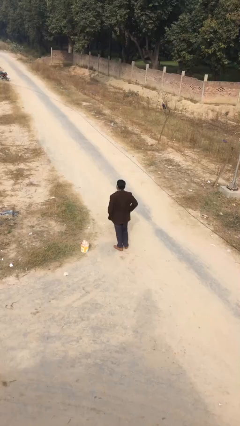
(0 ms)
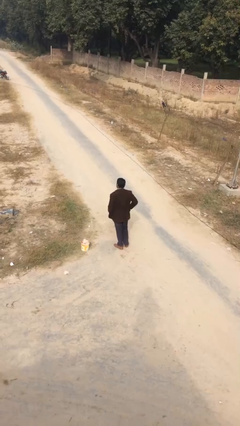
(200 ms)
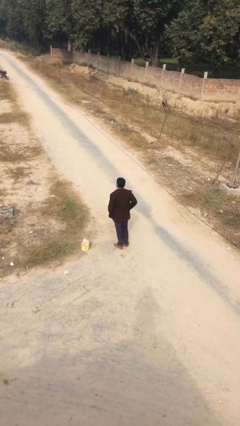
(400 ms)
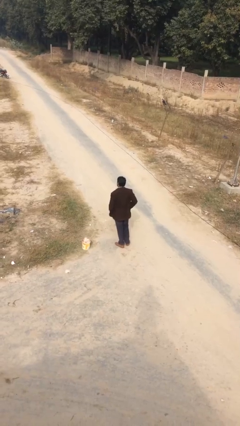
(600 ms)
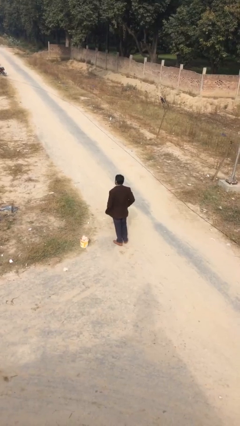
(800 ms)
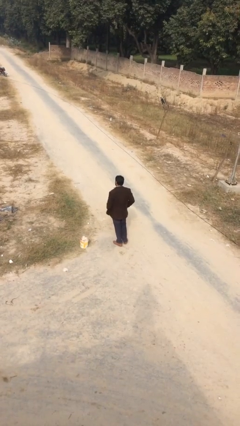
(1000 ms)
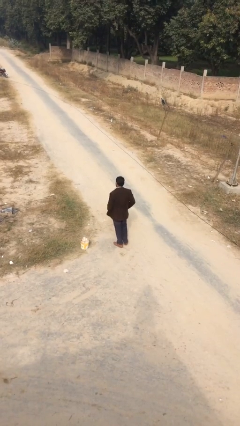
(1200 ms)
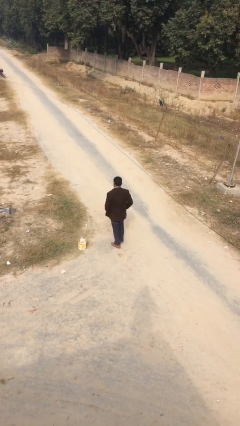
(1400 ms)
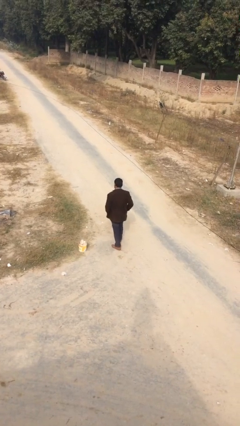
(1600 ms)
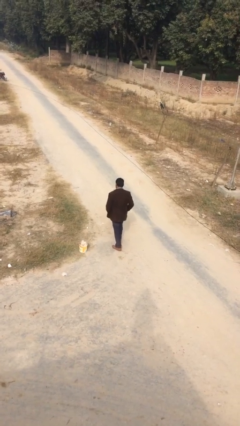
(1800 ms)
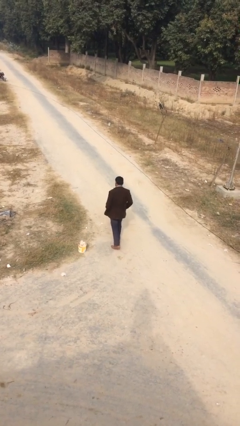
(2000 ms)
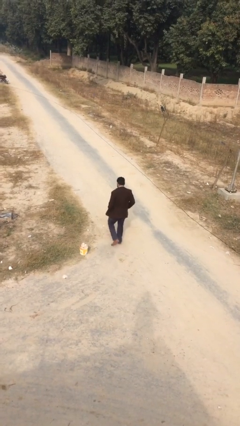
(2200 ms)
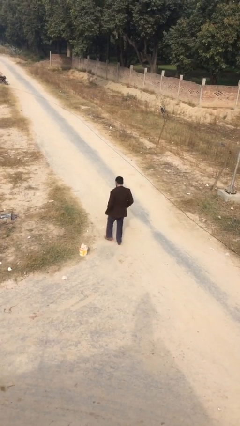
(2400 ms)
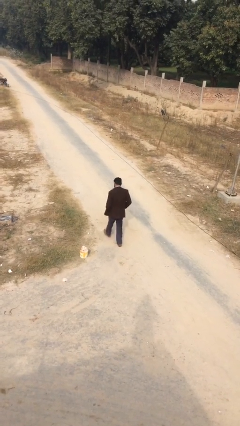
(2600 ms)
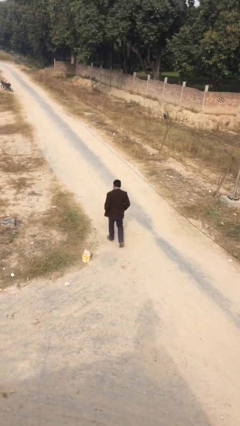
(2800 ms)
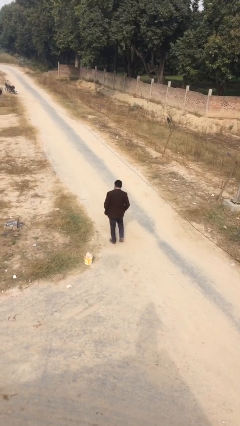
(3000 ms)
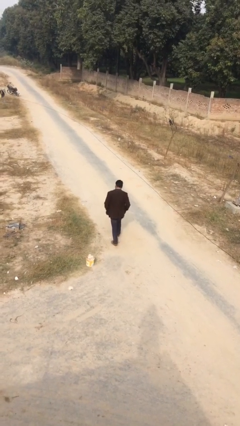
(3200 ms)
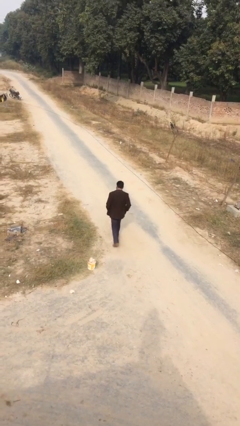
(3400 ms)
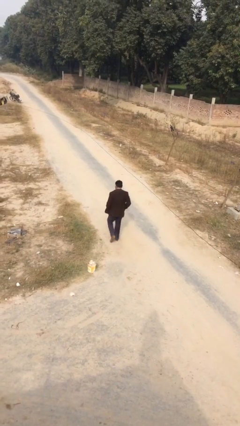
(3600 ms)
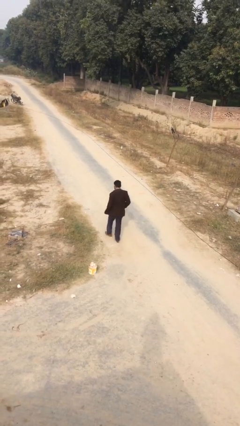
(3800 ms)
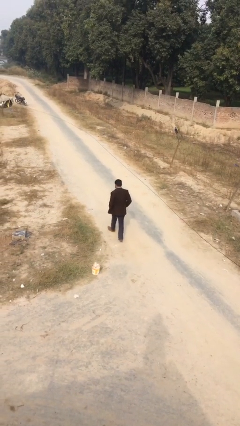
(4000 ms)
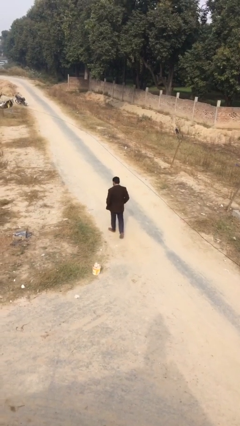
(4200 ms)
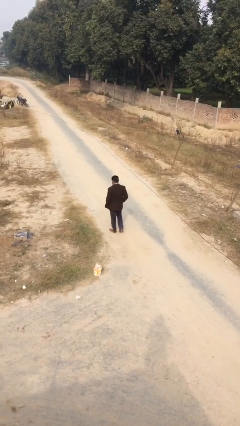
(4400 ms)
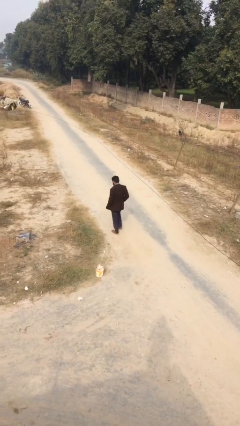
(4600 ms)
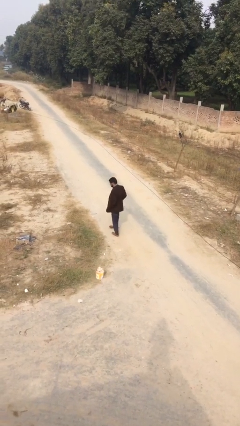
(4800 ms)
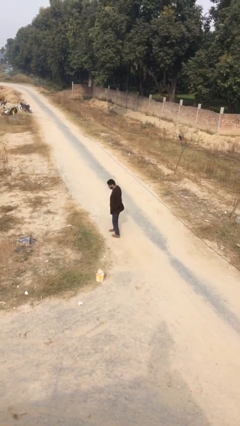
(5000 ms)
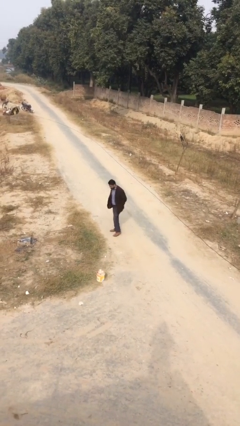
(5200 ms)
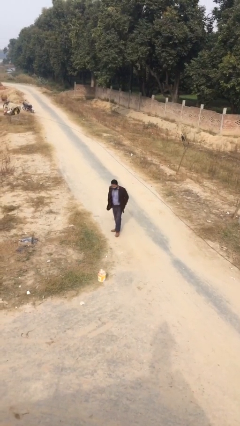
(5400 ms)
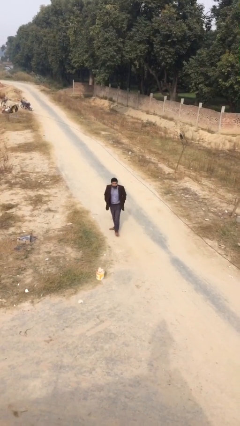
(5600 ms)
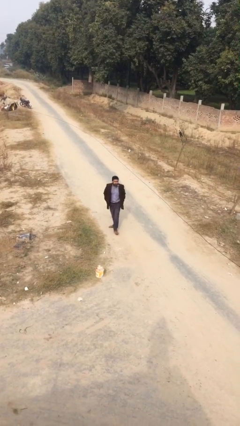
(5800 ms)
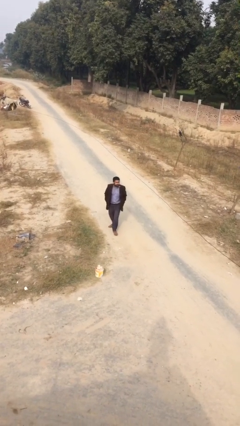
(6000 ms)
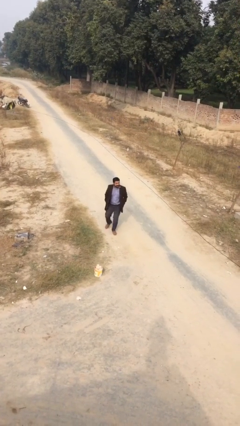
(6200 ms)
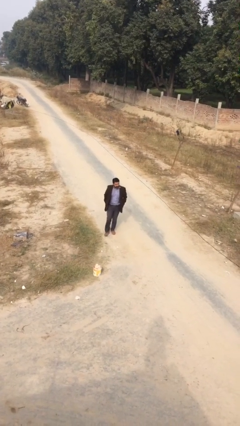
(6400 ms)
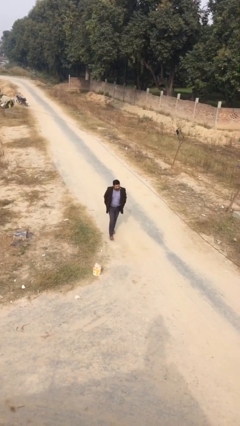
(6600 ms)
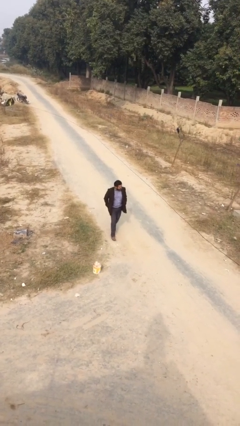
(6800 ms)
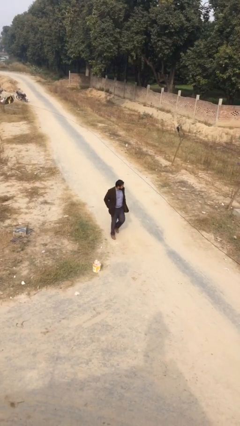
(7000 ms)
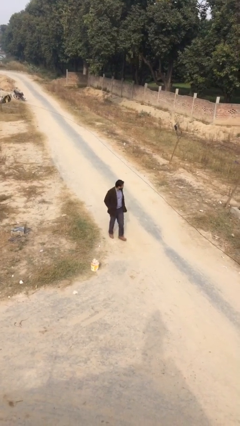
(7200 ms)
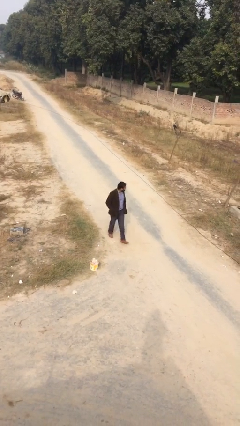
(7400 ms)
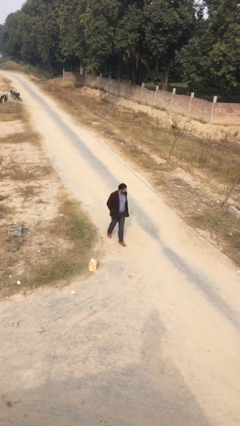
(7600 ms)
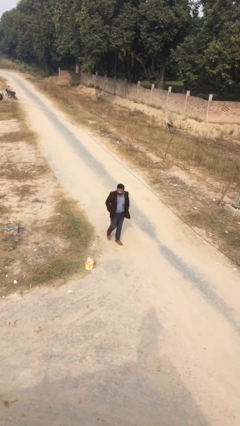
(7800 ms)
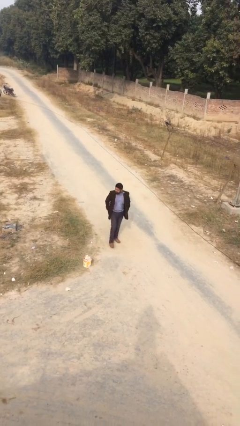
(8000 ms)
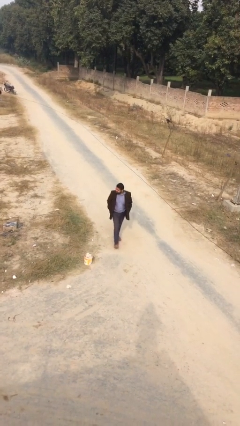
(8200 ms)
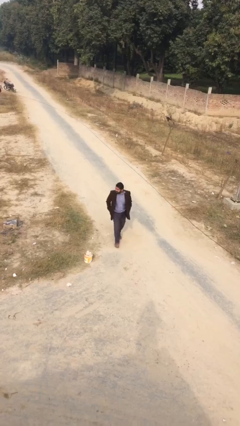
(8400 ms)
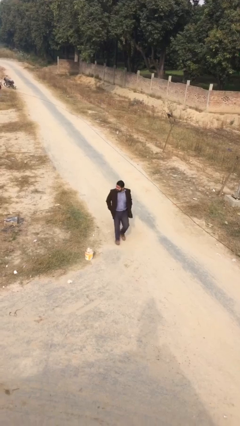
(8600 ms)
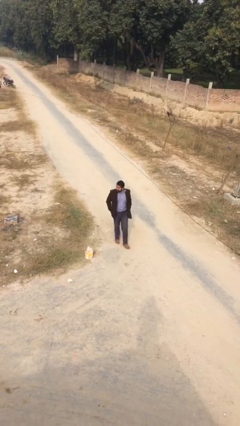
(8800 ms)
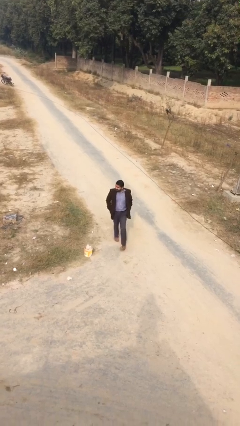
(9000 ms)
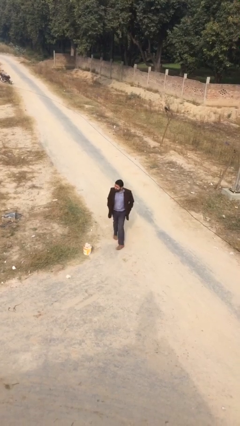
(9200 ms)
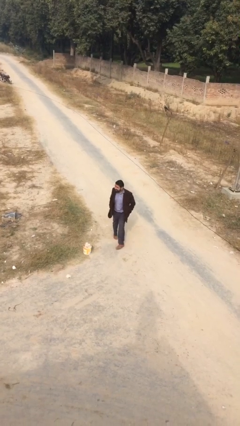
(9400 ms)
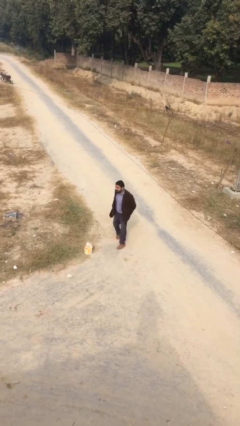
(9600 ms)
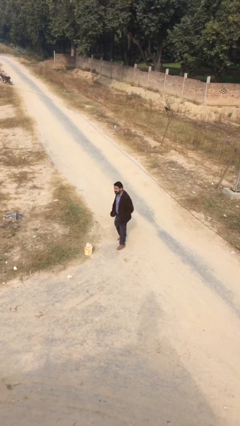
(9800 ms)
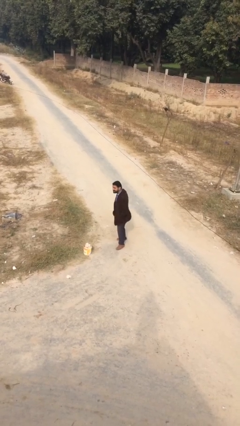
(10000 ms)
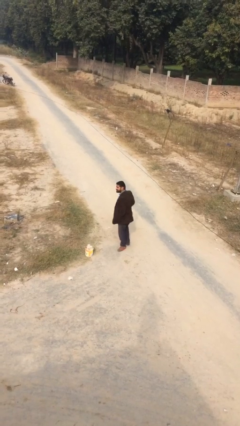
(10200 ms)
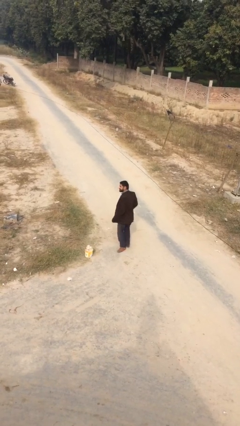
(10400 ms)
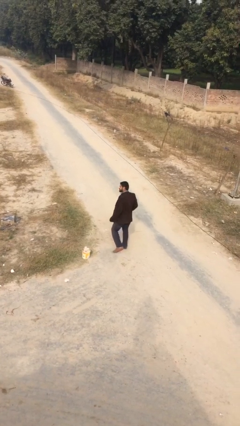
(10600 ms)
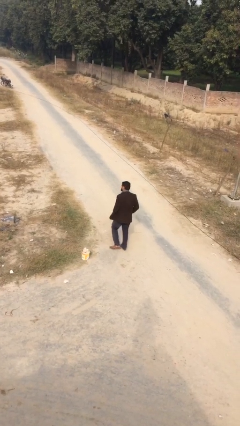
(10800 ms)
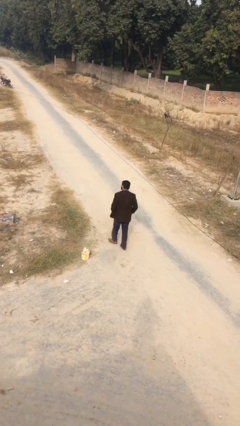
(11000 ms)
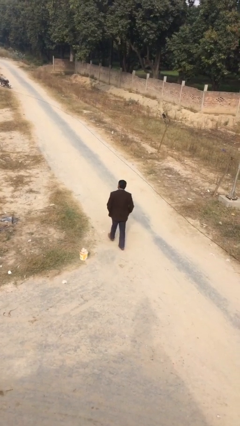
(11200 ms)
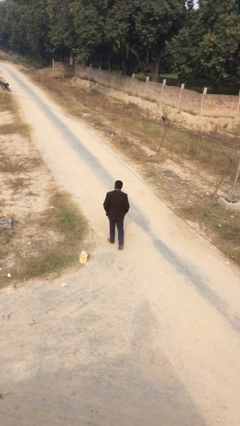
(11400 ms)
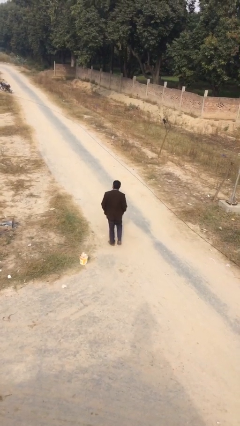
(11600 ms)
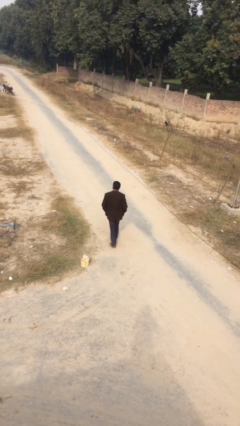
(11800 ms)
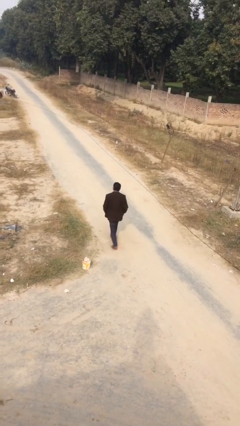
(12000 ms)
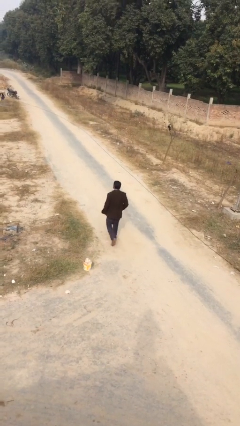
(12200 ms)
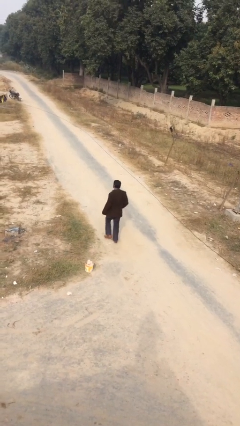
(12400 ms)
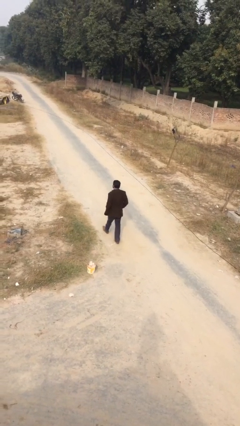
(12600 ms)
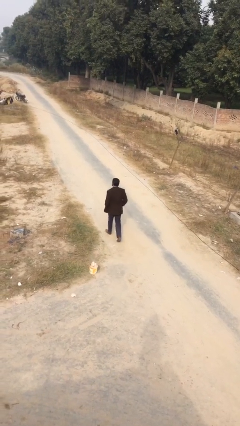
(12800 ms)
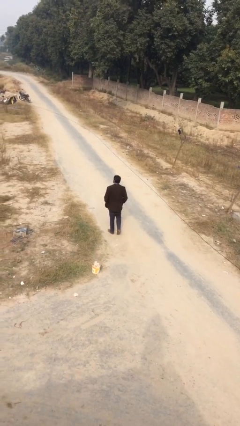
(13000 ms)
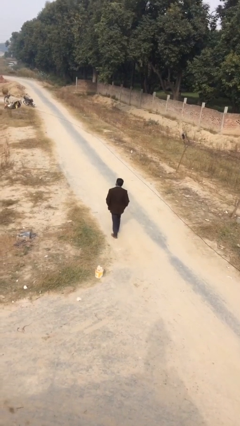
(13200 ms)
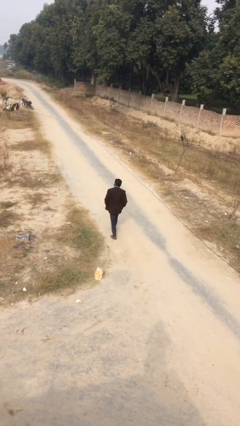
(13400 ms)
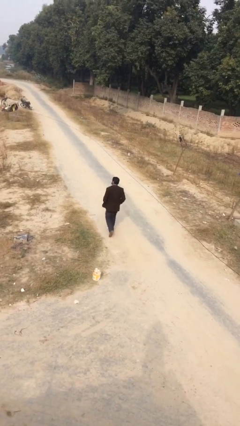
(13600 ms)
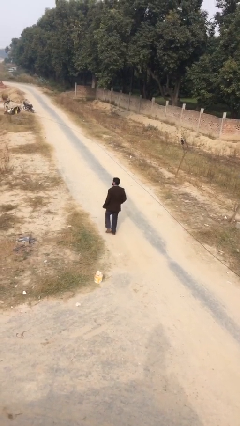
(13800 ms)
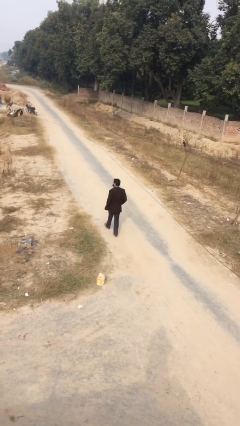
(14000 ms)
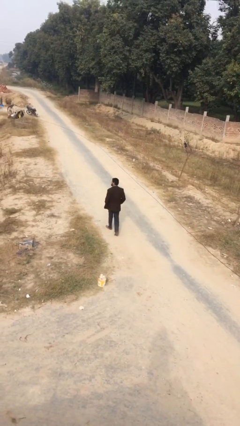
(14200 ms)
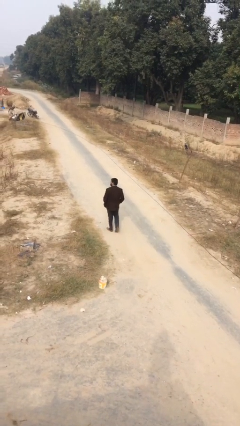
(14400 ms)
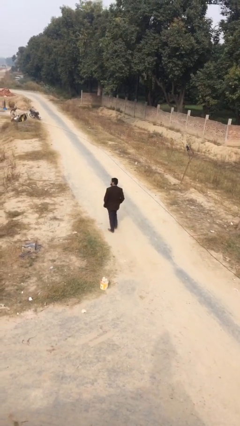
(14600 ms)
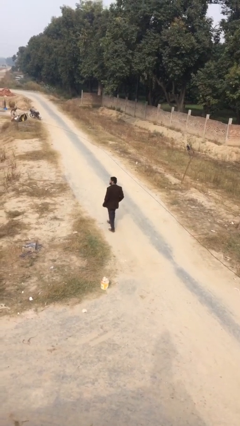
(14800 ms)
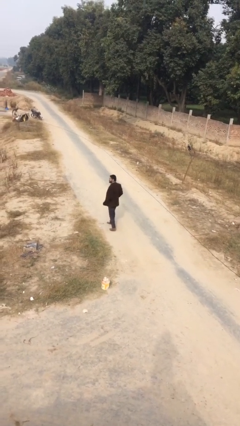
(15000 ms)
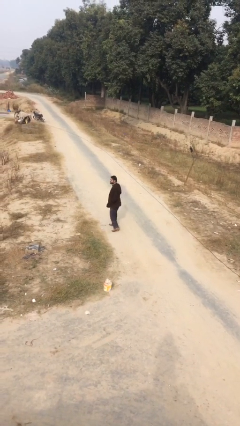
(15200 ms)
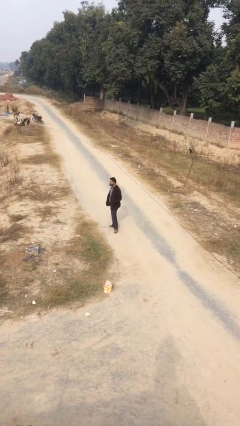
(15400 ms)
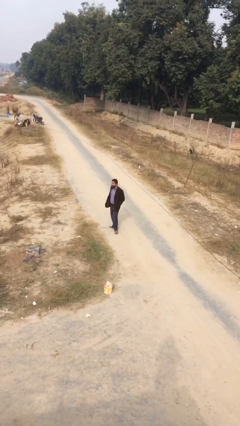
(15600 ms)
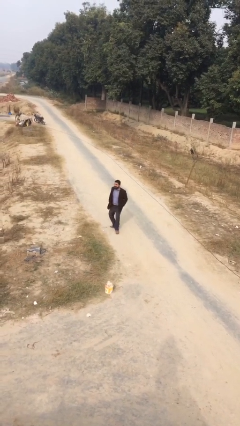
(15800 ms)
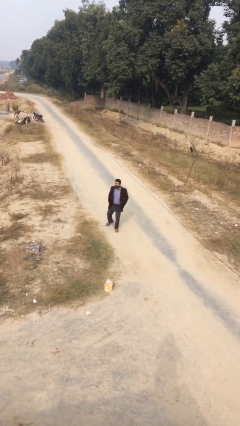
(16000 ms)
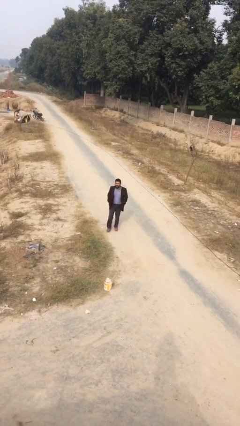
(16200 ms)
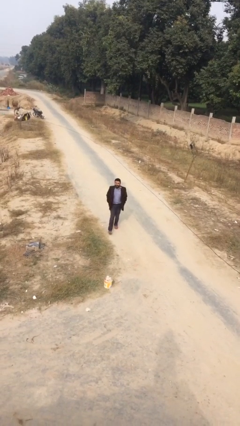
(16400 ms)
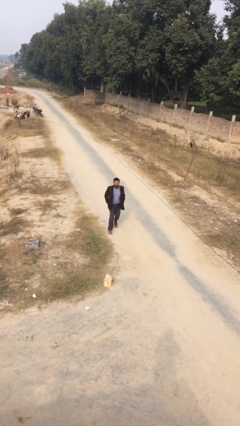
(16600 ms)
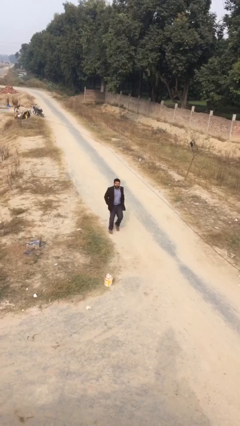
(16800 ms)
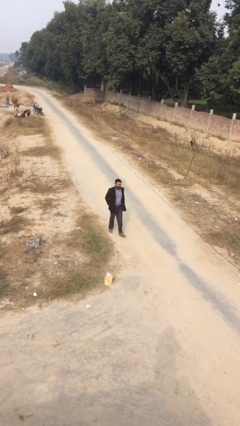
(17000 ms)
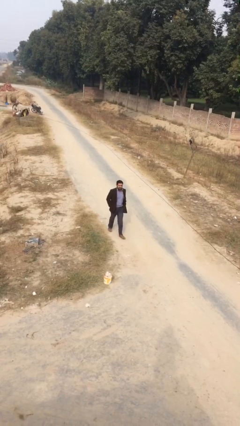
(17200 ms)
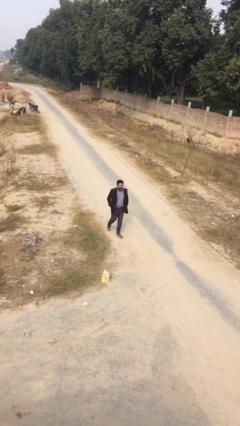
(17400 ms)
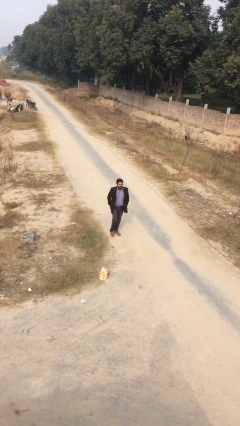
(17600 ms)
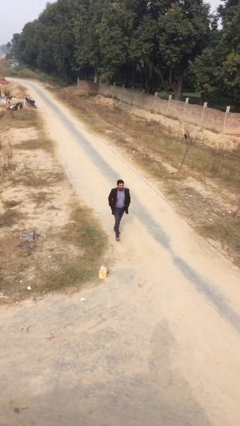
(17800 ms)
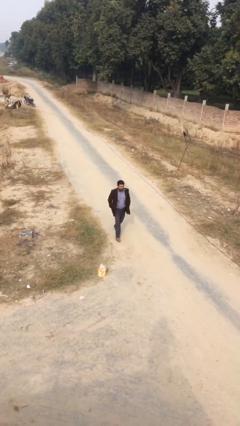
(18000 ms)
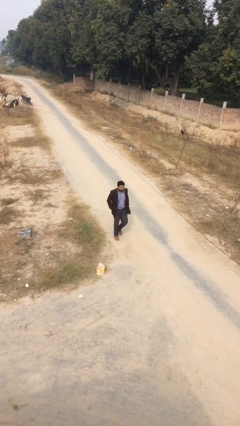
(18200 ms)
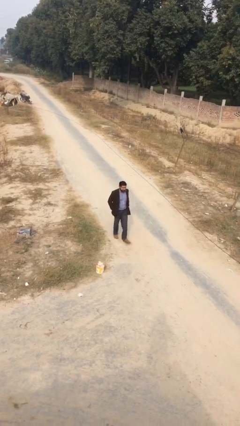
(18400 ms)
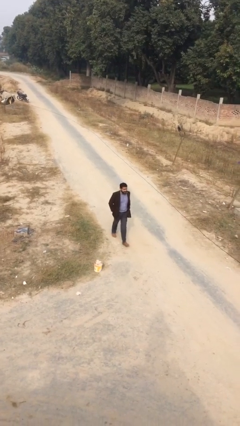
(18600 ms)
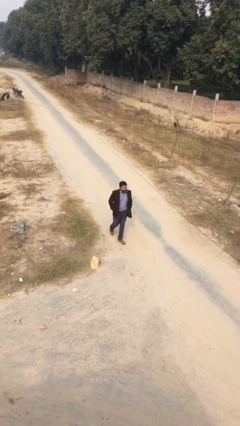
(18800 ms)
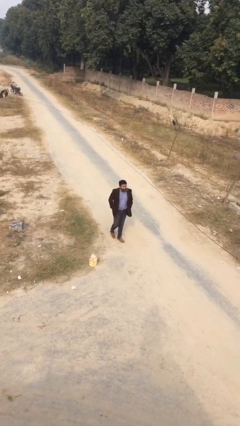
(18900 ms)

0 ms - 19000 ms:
person walks
